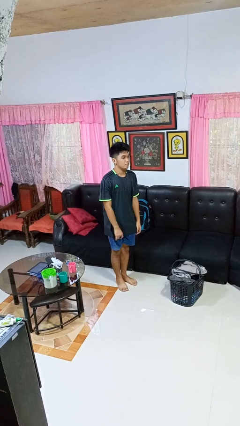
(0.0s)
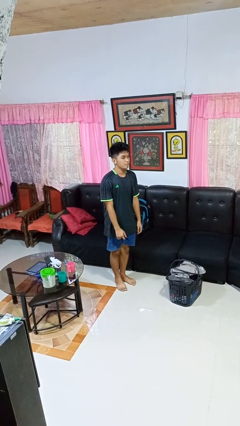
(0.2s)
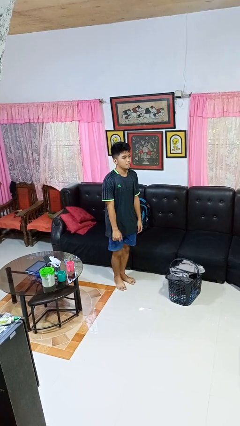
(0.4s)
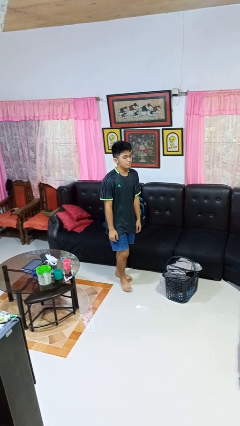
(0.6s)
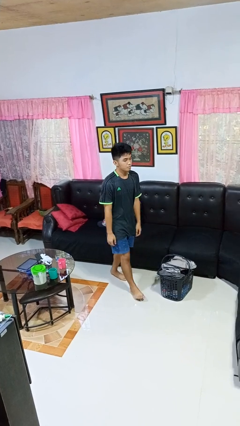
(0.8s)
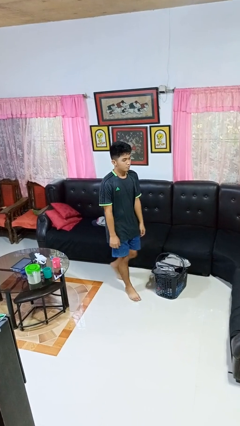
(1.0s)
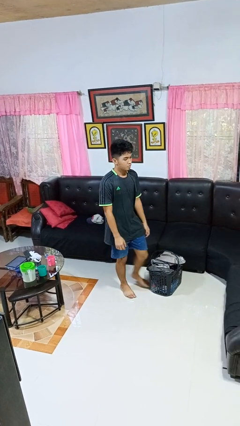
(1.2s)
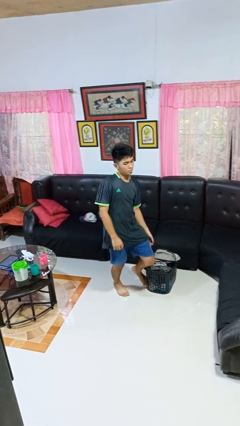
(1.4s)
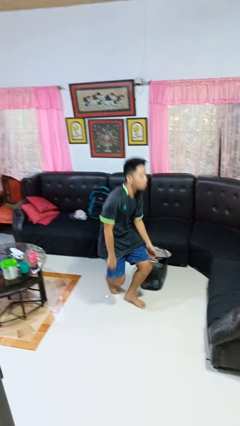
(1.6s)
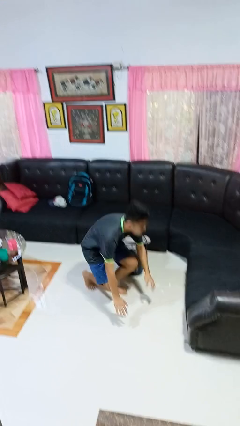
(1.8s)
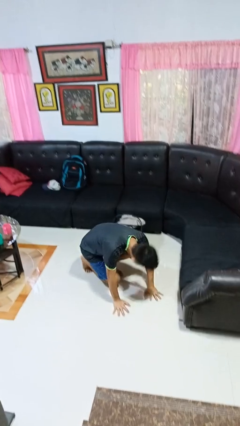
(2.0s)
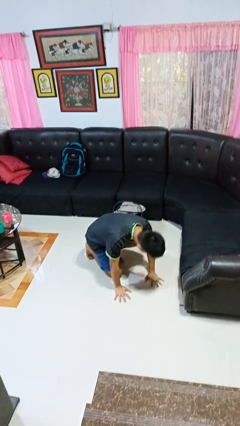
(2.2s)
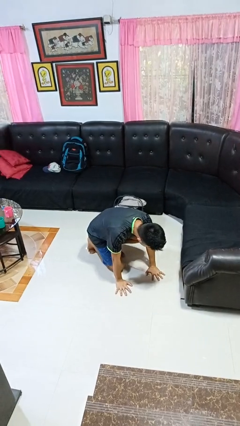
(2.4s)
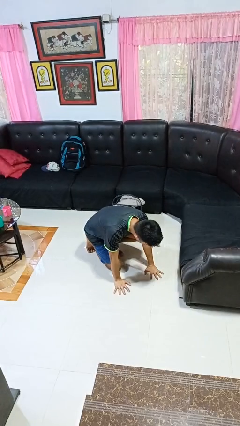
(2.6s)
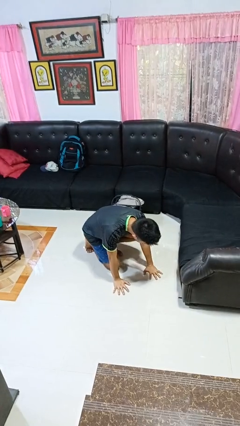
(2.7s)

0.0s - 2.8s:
person trips on object on floor

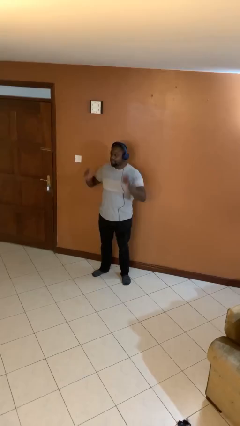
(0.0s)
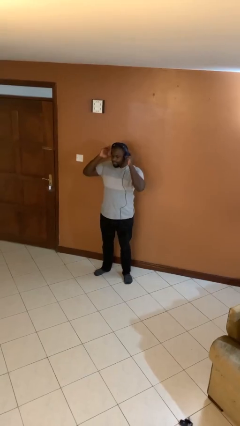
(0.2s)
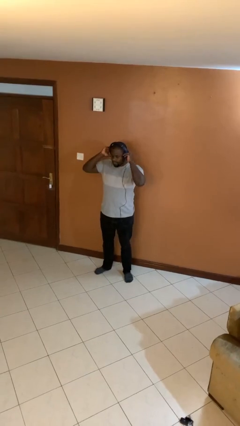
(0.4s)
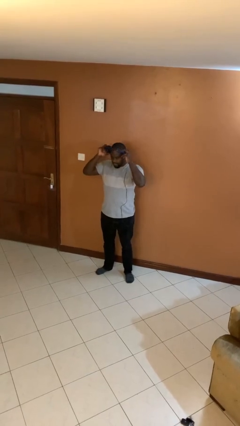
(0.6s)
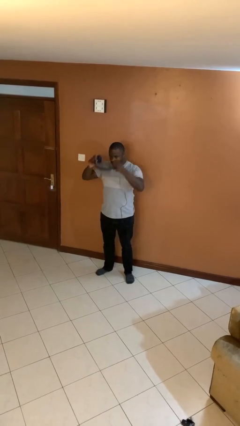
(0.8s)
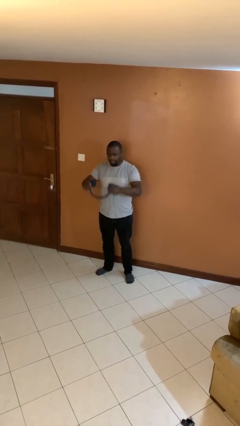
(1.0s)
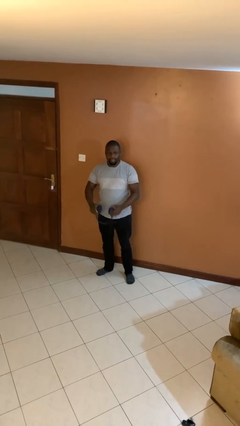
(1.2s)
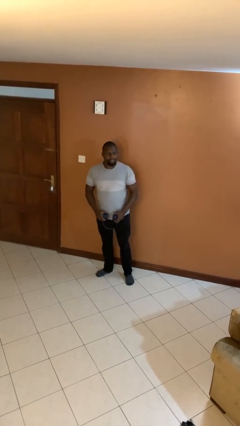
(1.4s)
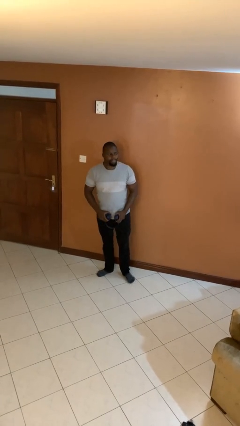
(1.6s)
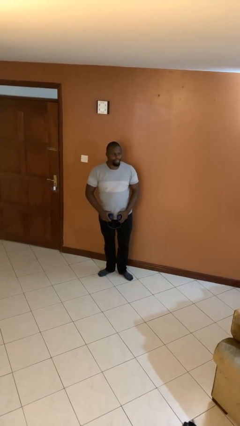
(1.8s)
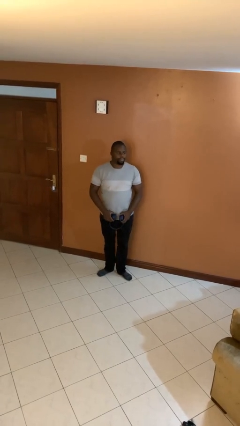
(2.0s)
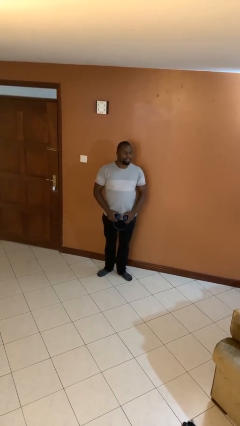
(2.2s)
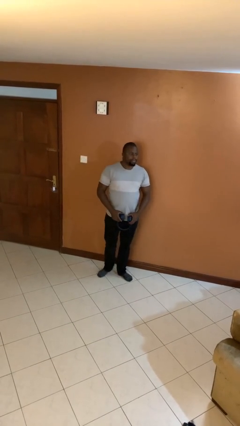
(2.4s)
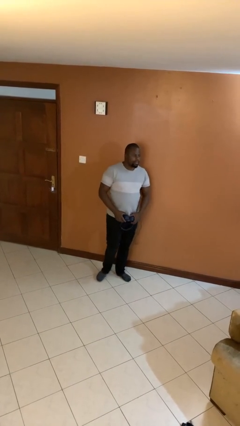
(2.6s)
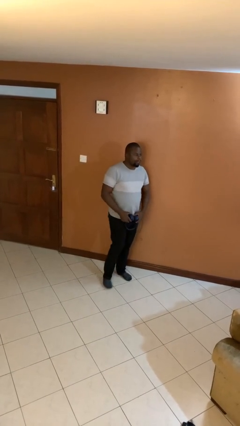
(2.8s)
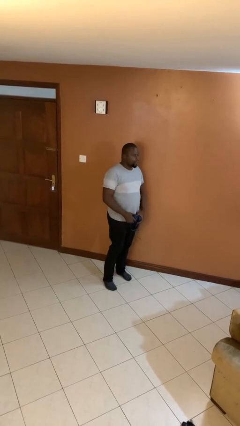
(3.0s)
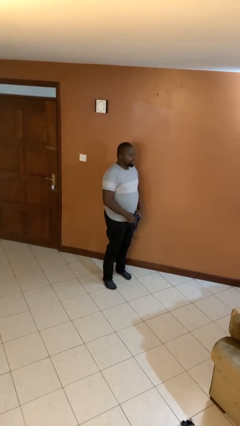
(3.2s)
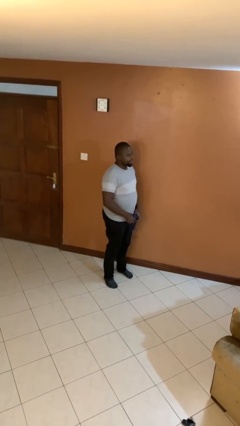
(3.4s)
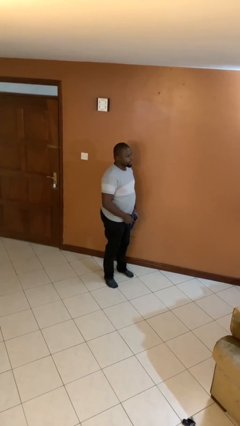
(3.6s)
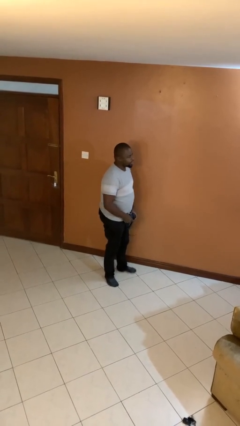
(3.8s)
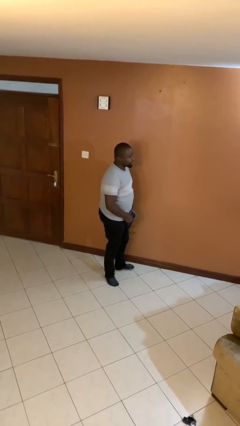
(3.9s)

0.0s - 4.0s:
person takes off headphones

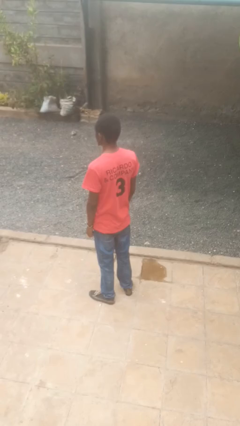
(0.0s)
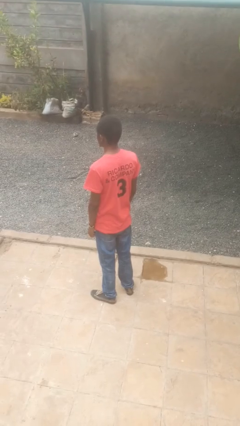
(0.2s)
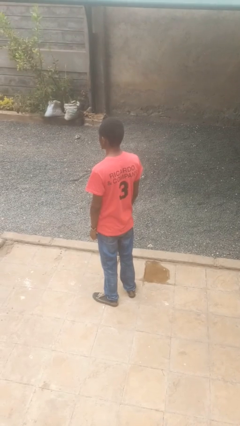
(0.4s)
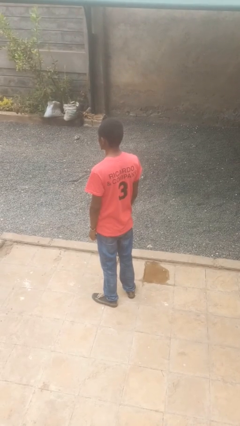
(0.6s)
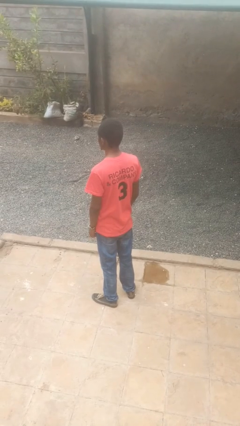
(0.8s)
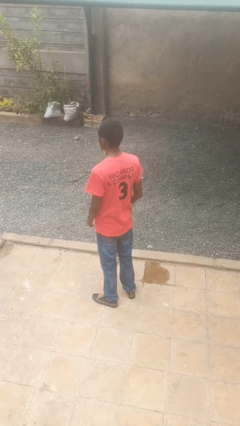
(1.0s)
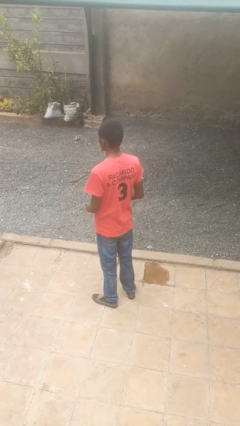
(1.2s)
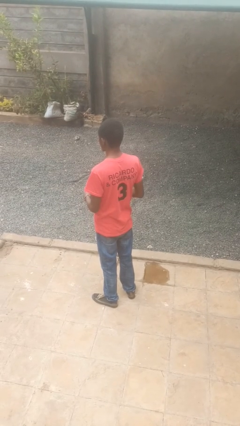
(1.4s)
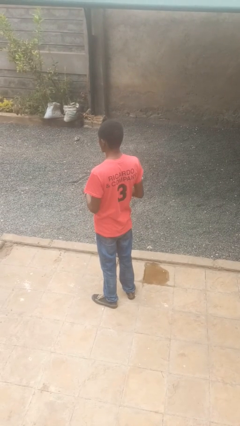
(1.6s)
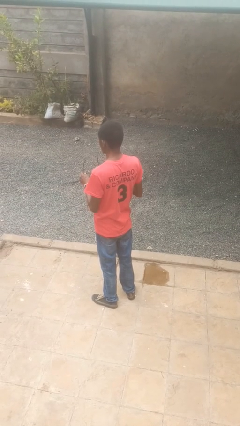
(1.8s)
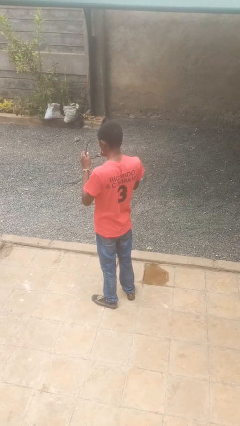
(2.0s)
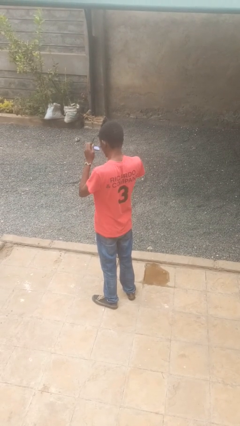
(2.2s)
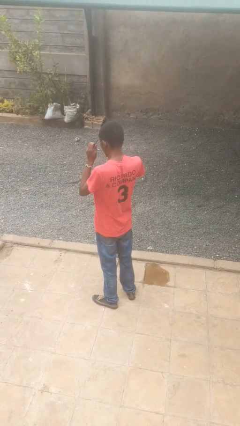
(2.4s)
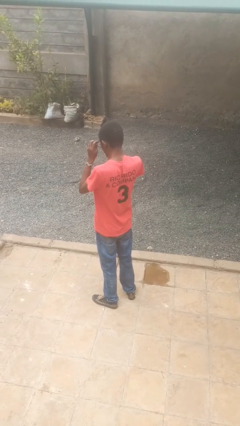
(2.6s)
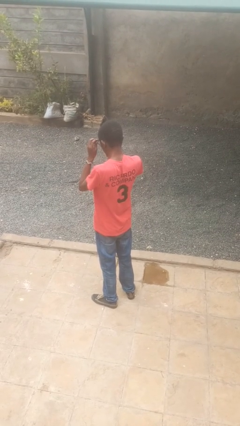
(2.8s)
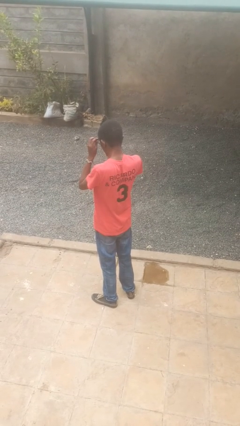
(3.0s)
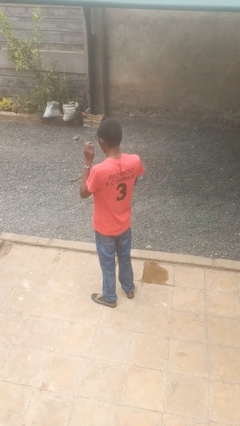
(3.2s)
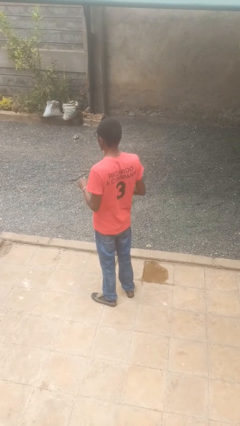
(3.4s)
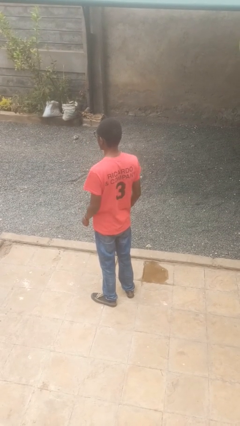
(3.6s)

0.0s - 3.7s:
person puts on glasses

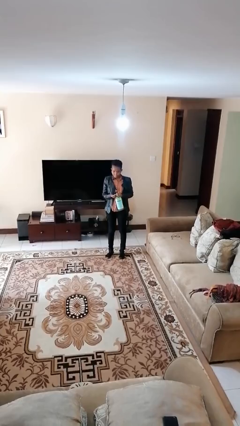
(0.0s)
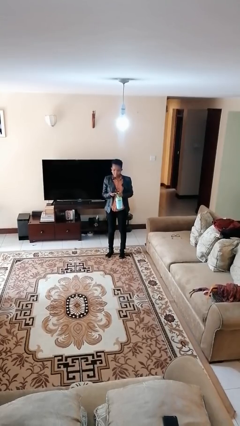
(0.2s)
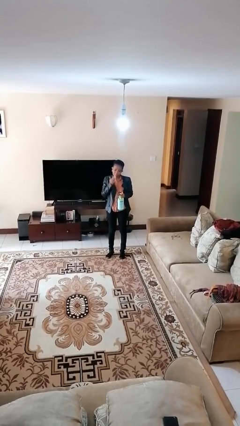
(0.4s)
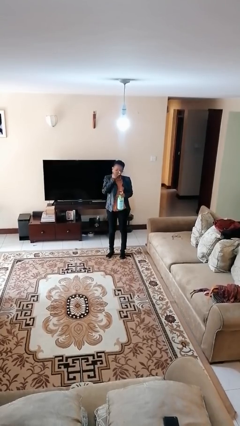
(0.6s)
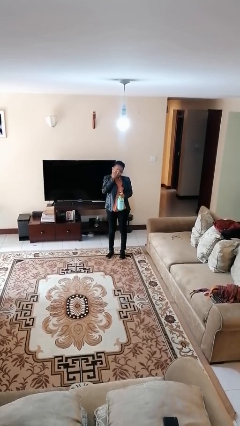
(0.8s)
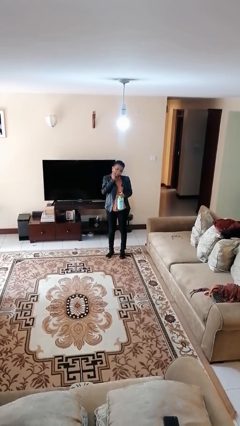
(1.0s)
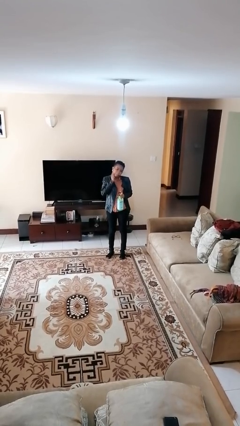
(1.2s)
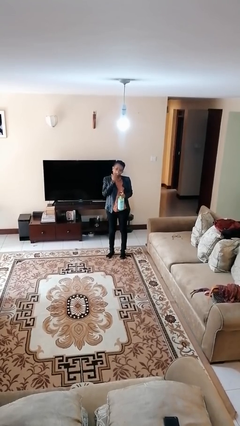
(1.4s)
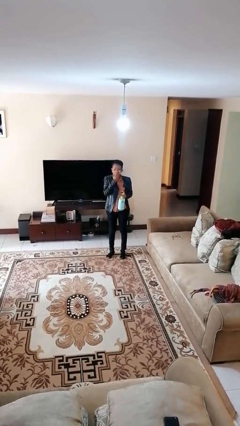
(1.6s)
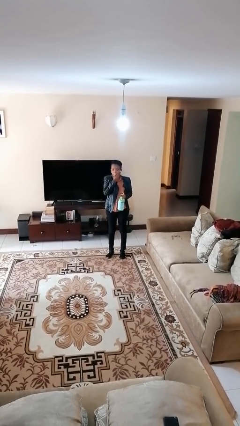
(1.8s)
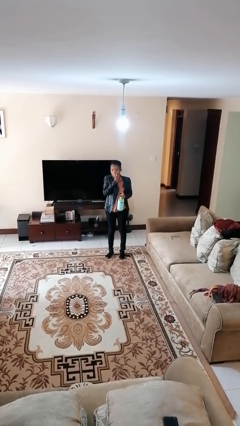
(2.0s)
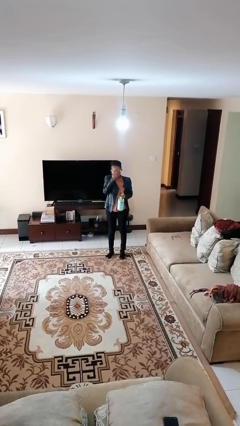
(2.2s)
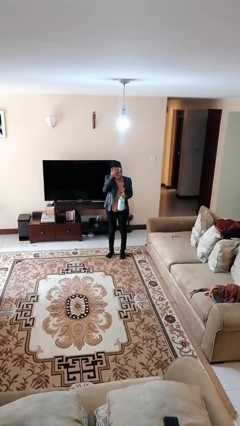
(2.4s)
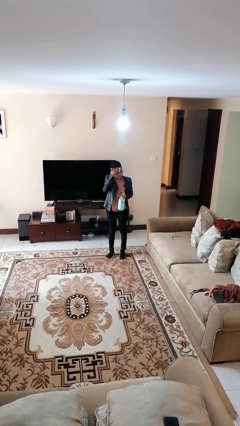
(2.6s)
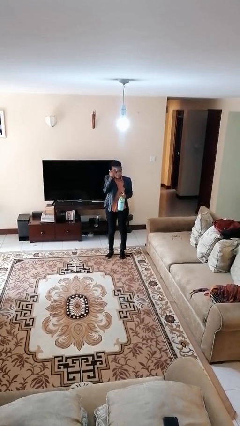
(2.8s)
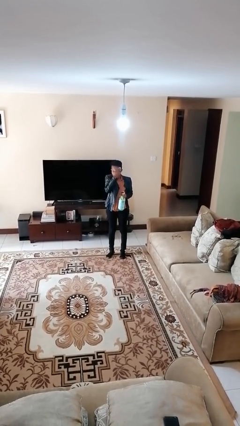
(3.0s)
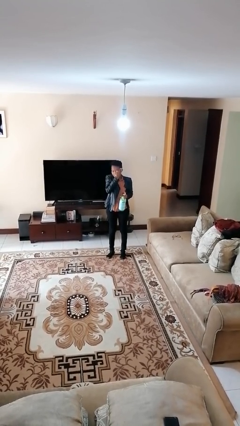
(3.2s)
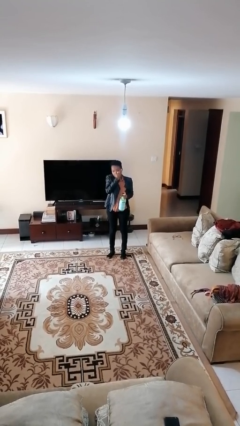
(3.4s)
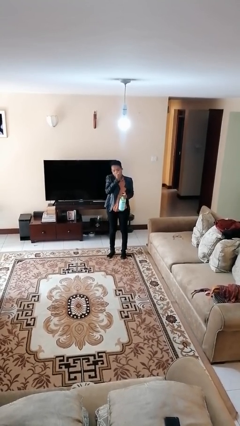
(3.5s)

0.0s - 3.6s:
person applies facial moisturizer

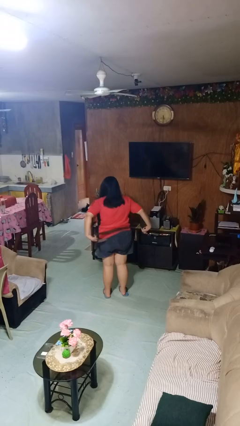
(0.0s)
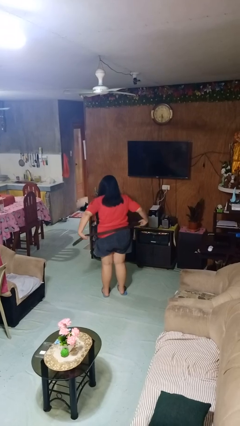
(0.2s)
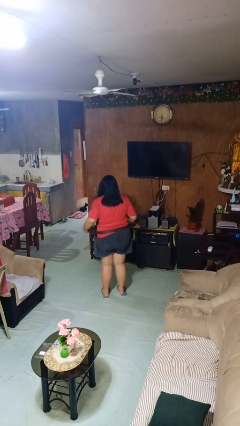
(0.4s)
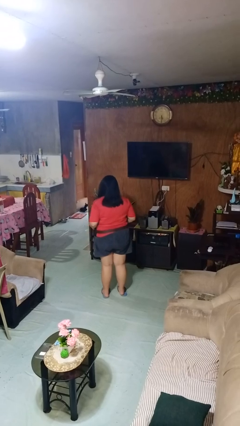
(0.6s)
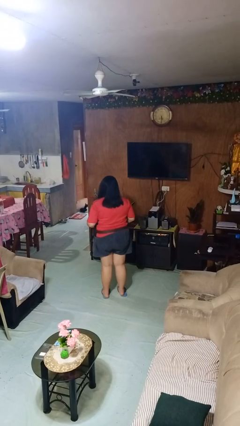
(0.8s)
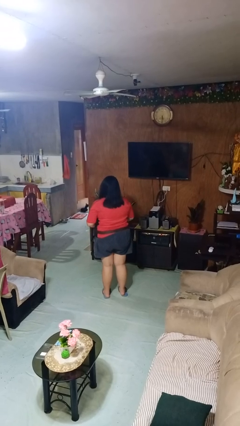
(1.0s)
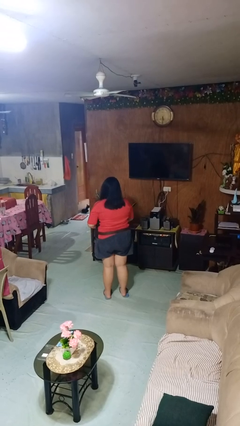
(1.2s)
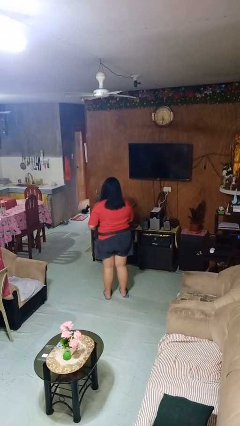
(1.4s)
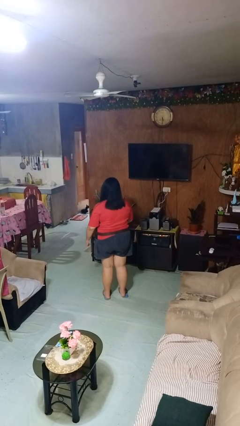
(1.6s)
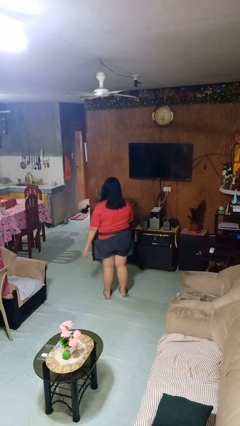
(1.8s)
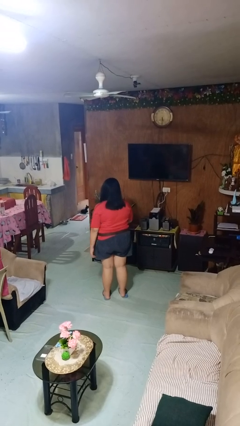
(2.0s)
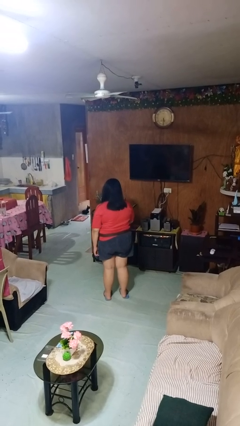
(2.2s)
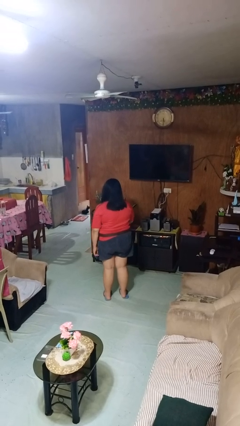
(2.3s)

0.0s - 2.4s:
person puts on belt

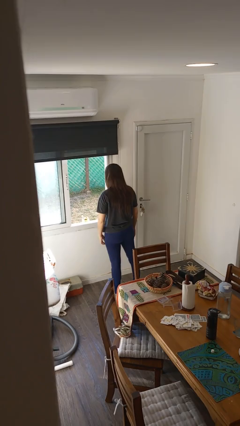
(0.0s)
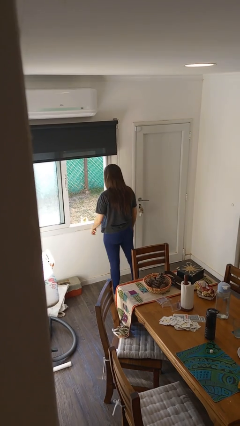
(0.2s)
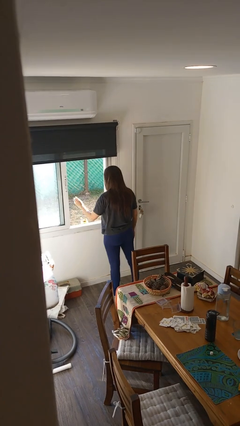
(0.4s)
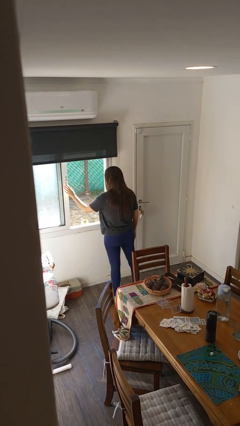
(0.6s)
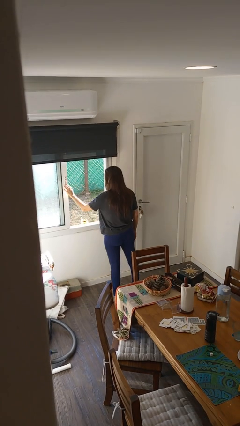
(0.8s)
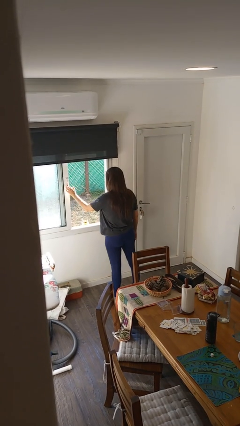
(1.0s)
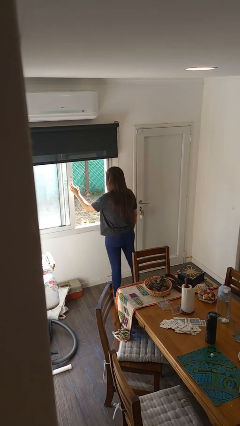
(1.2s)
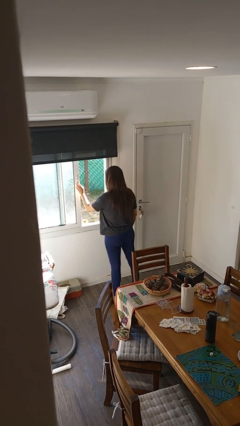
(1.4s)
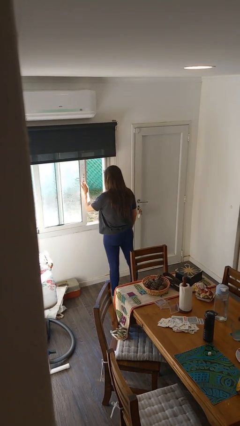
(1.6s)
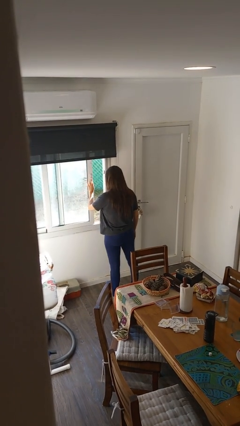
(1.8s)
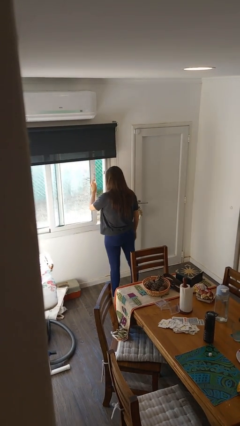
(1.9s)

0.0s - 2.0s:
person closes home window
